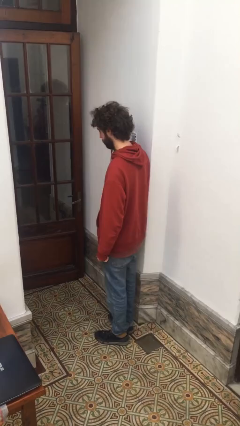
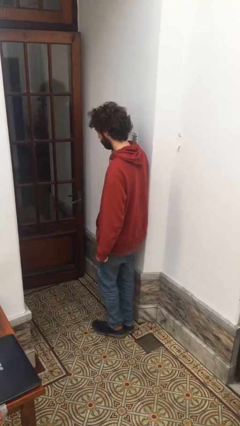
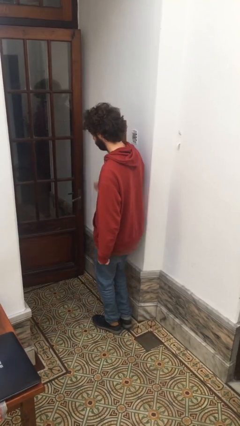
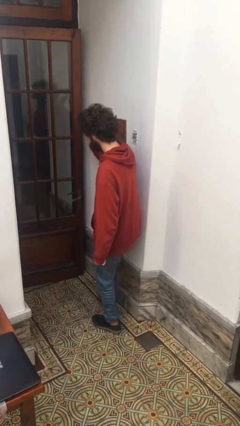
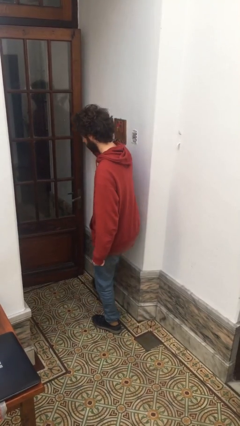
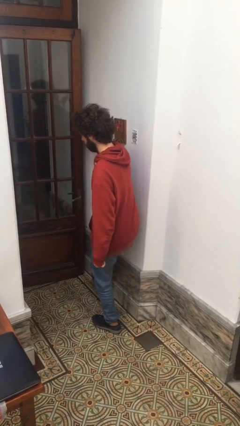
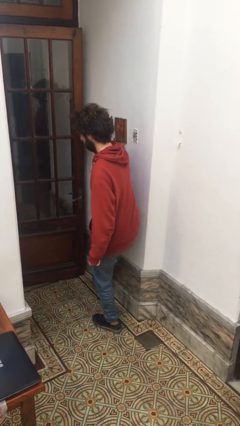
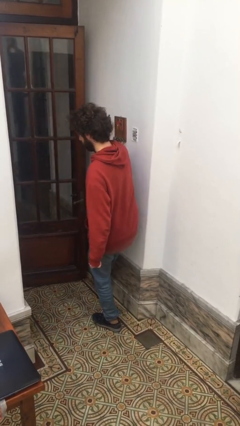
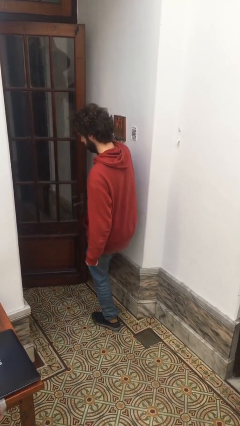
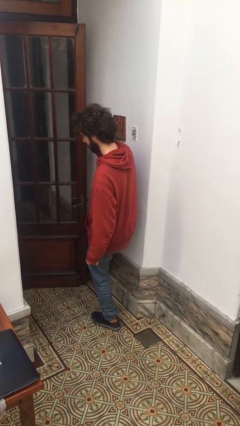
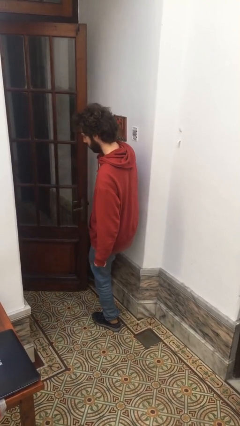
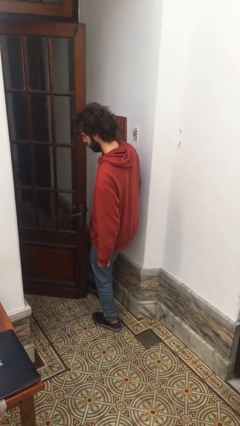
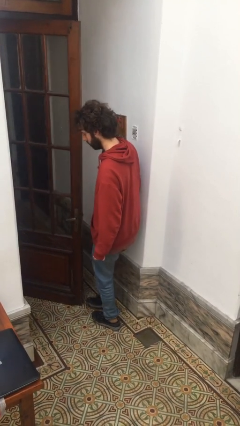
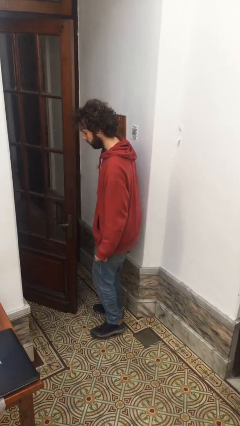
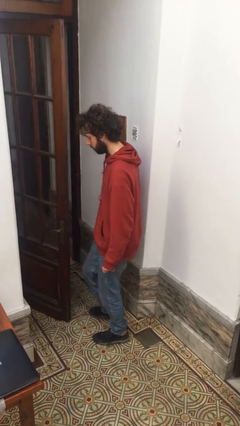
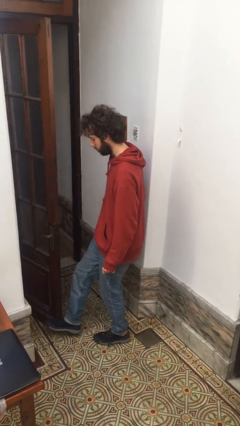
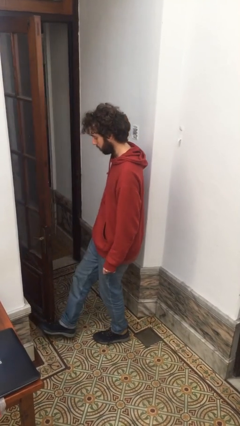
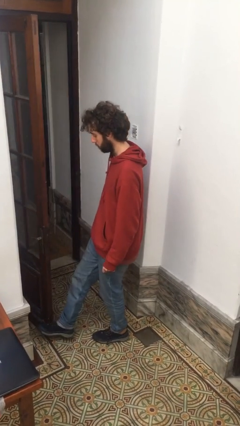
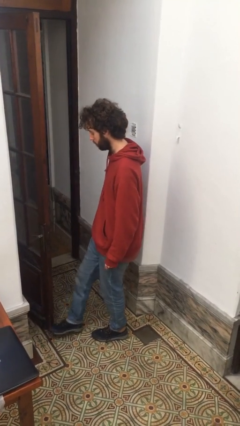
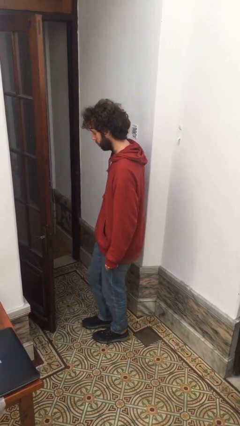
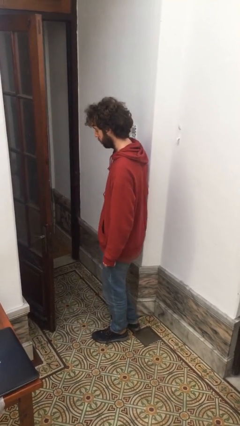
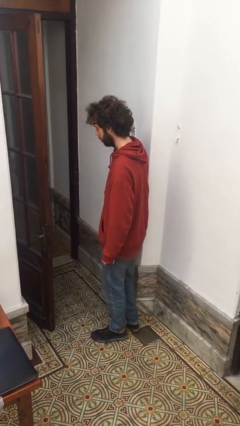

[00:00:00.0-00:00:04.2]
person opens facility door

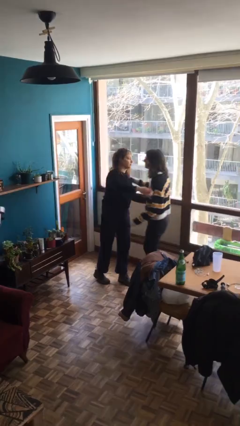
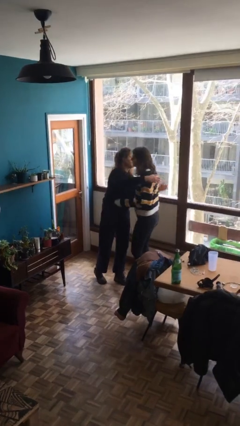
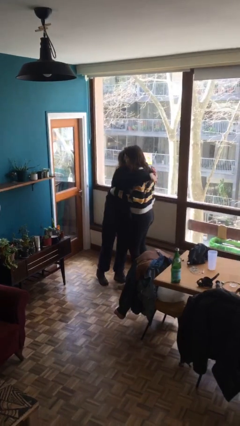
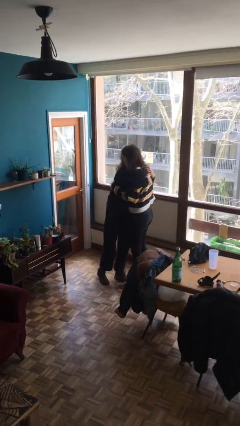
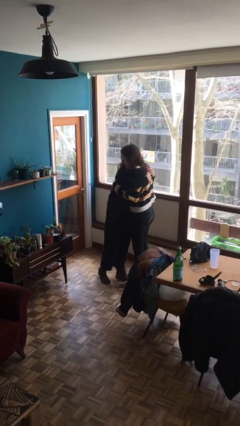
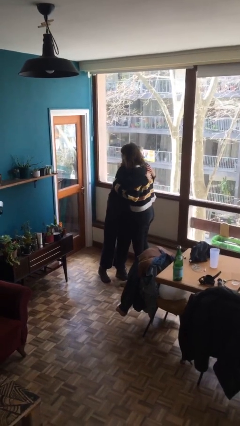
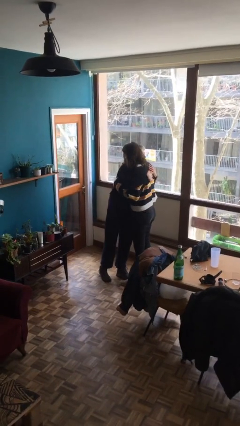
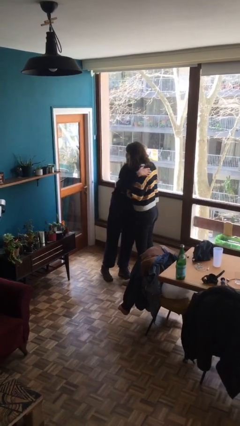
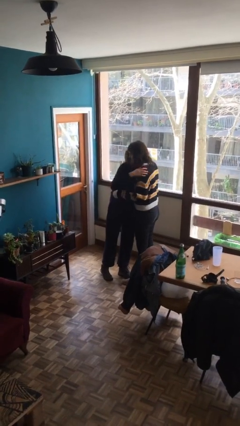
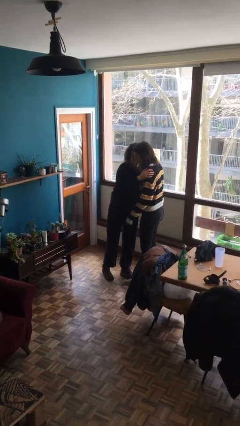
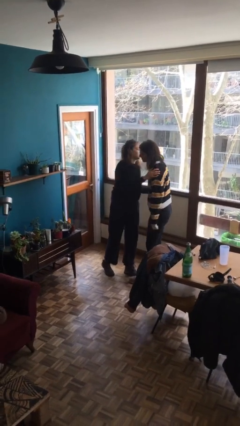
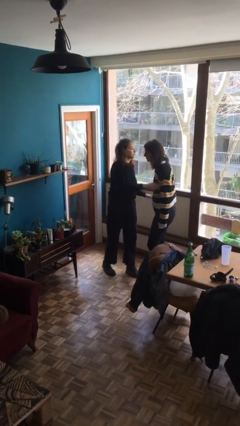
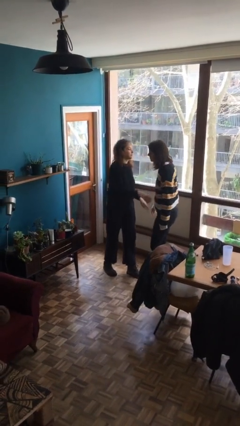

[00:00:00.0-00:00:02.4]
person embraces person

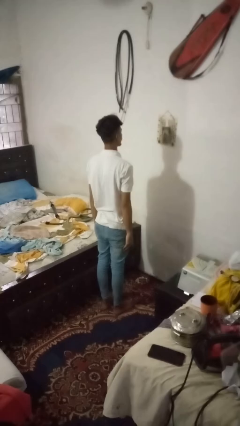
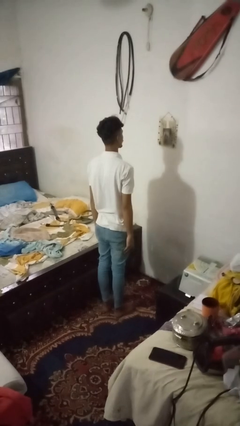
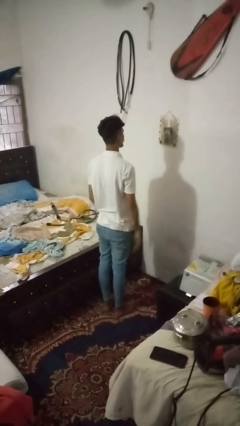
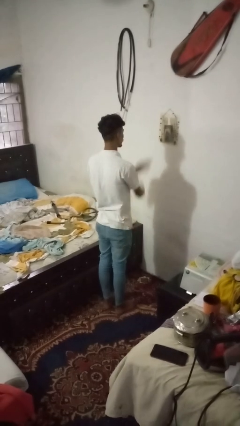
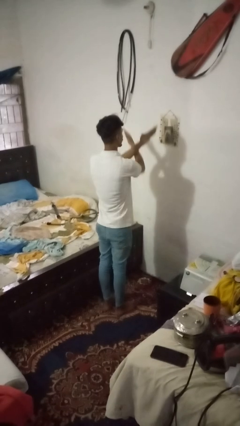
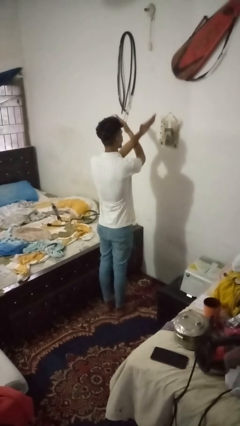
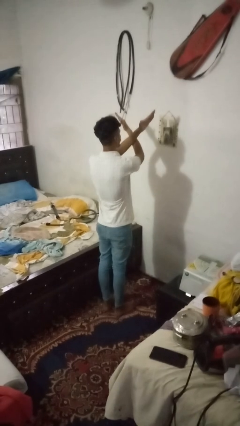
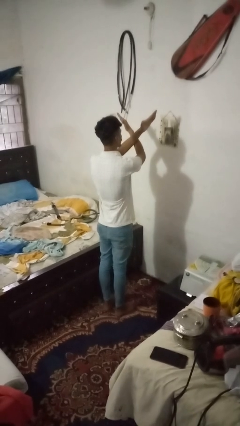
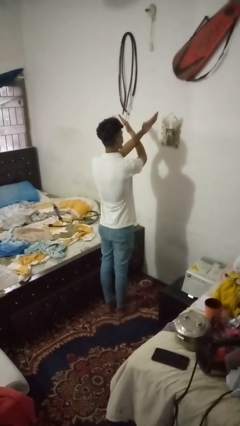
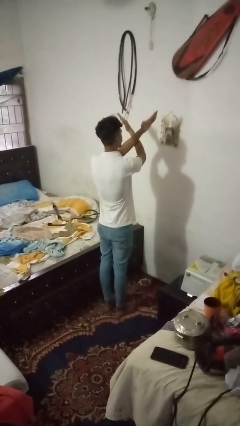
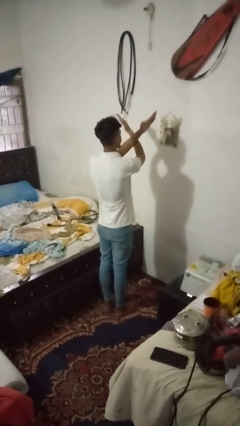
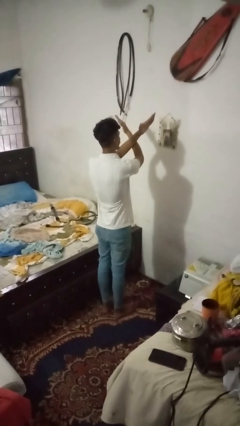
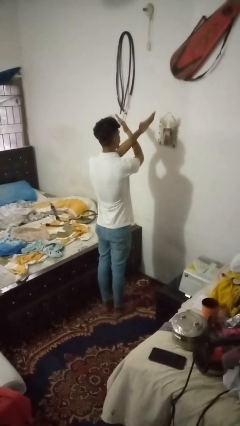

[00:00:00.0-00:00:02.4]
person gestures arms x

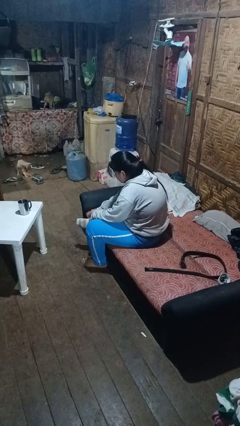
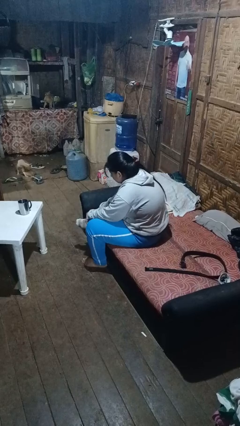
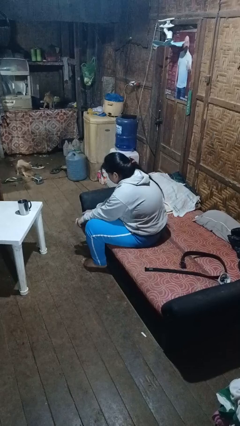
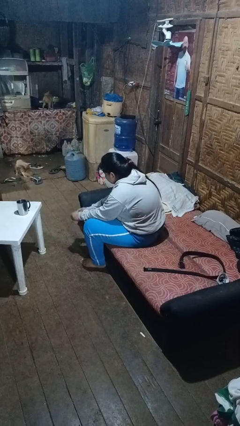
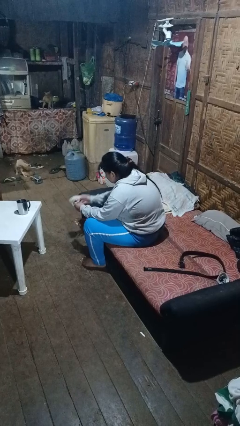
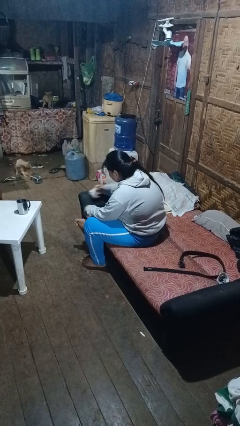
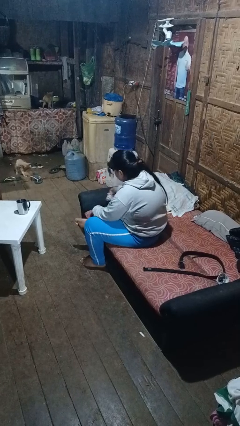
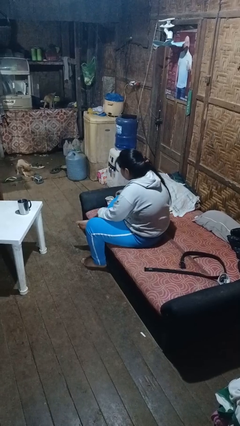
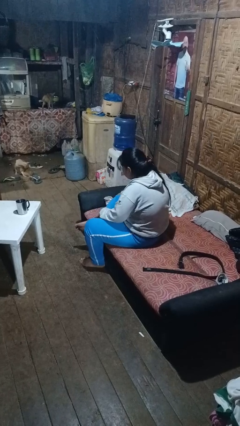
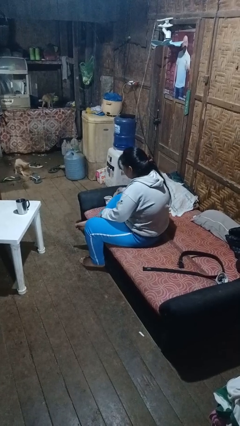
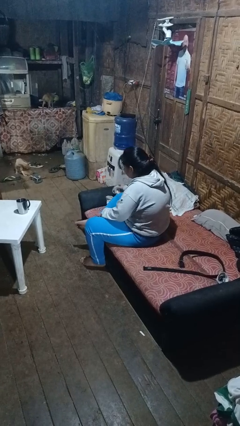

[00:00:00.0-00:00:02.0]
person takes off socks

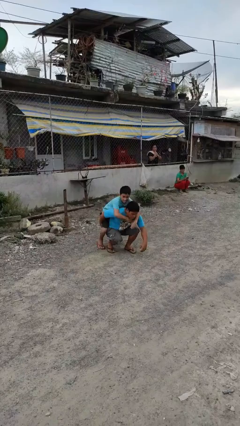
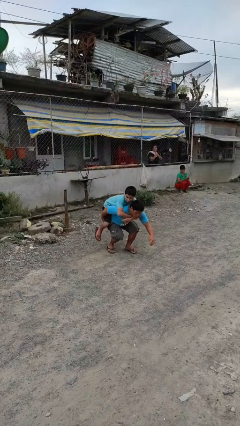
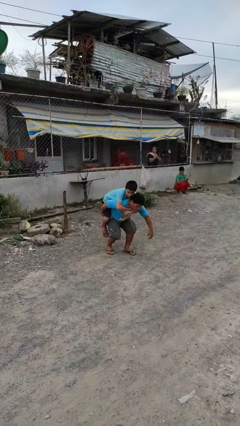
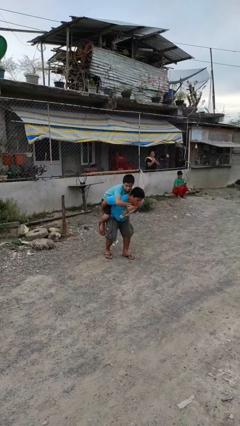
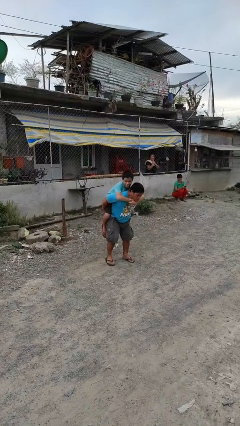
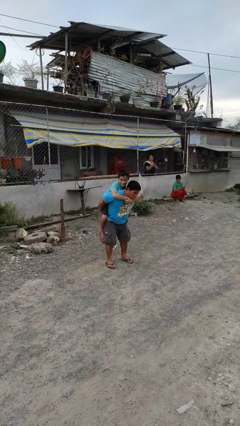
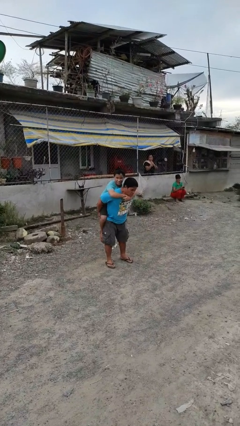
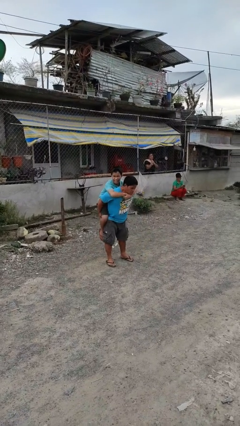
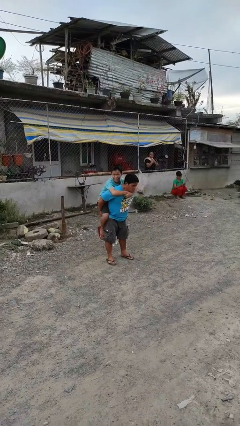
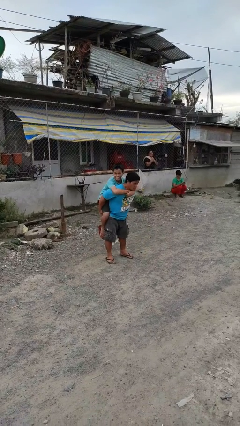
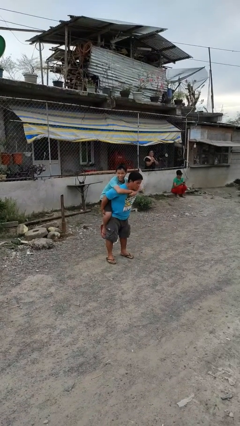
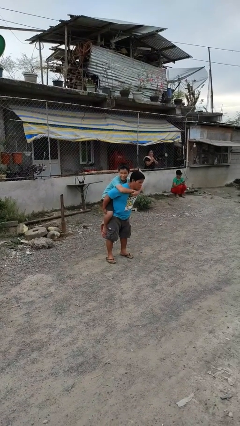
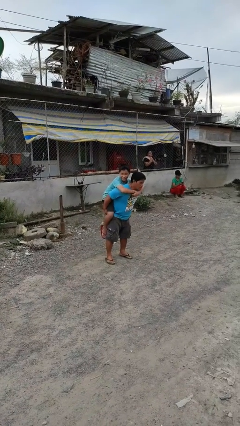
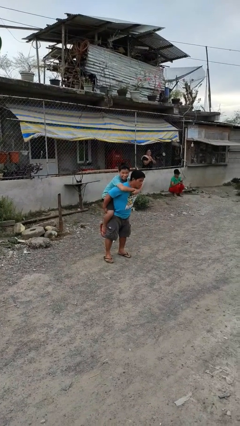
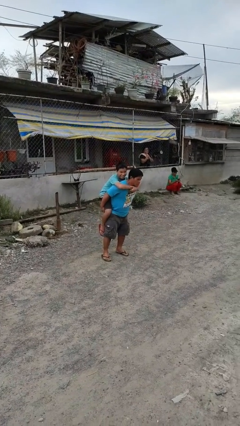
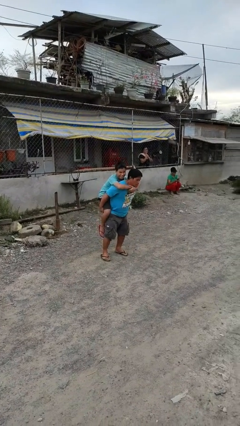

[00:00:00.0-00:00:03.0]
person carries person over shoulder

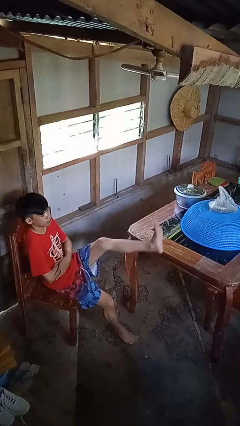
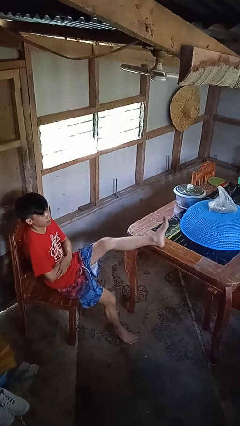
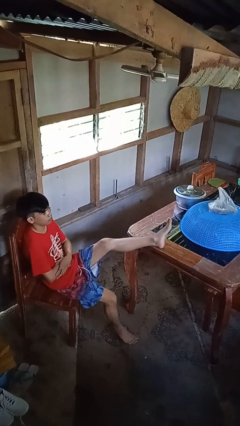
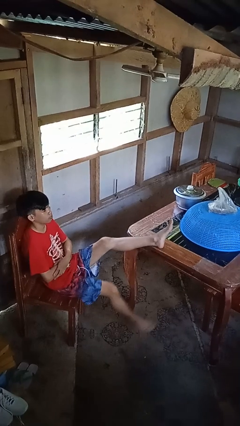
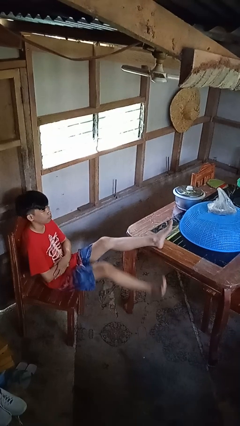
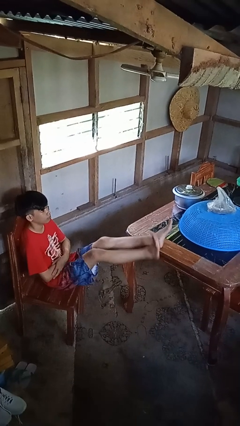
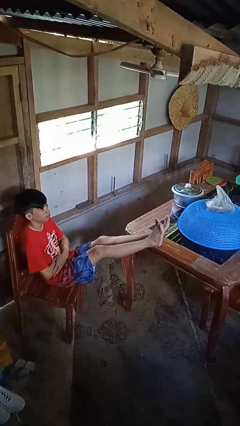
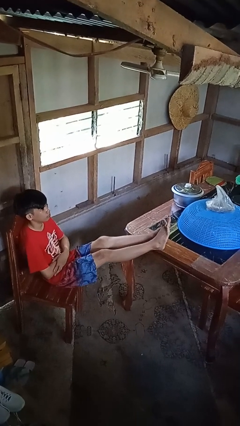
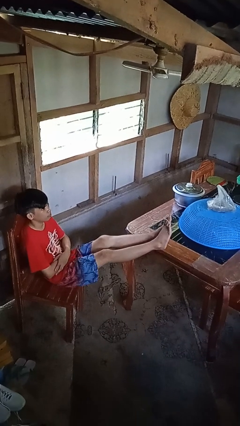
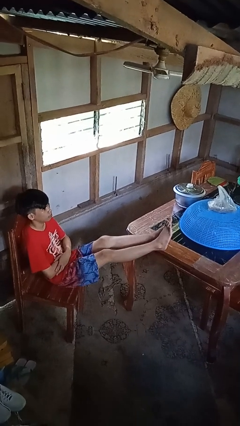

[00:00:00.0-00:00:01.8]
person puts feet up

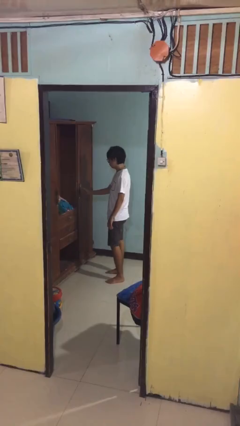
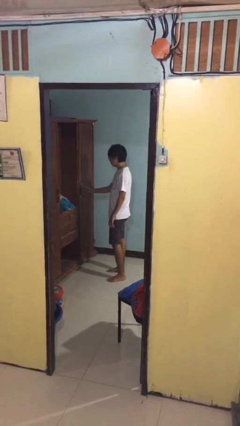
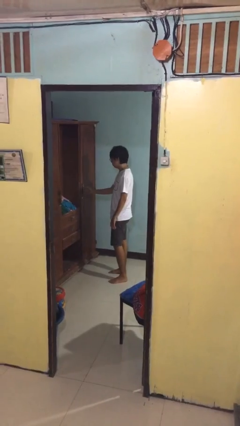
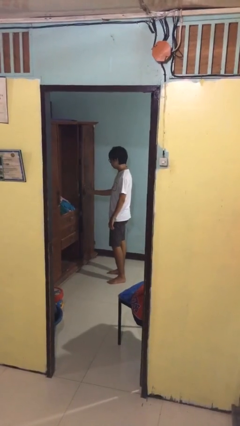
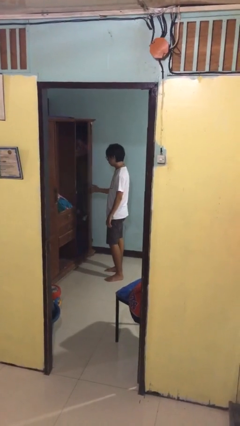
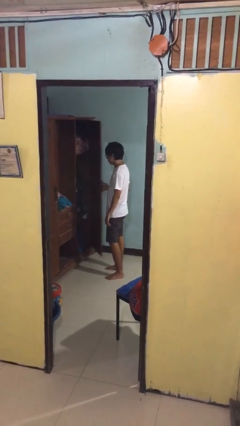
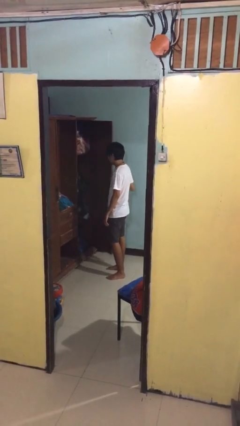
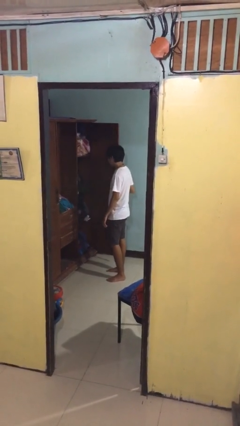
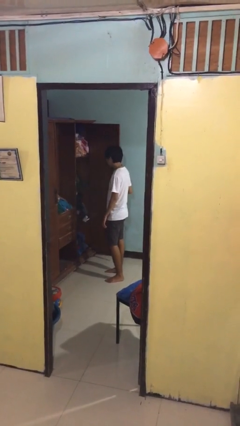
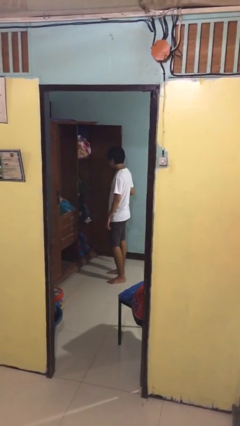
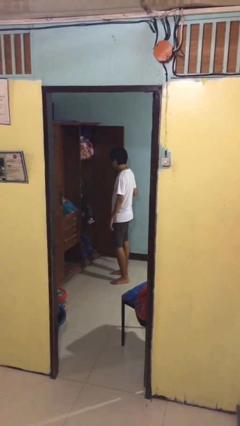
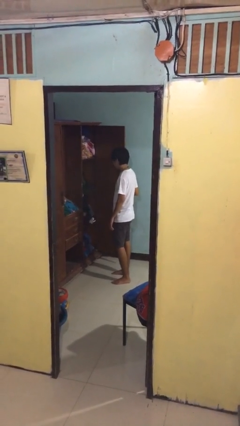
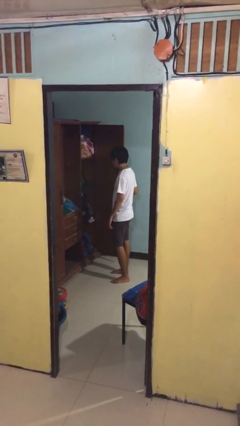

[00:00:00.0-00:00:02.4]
person opens closet door
